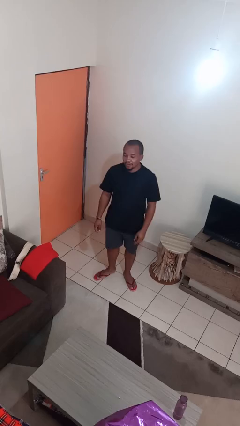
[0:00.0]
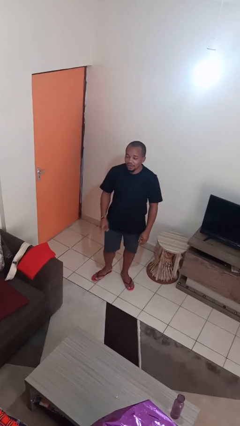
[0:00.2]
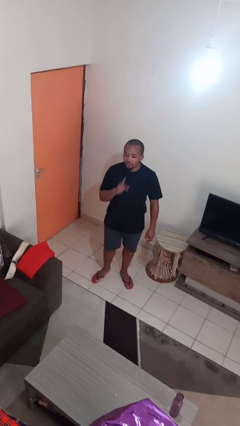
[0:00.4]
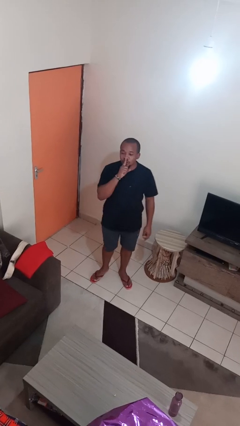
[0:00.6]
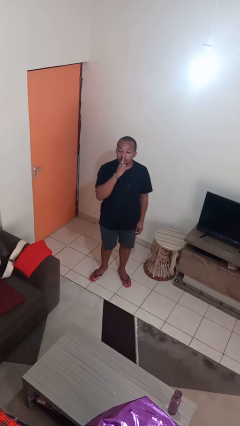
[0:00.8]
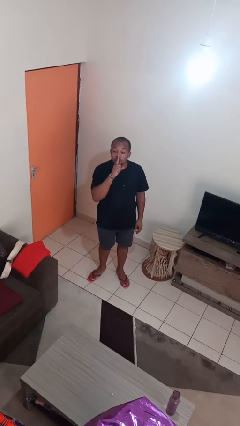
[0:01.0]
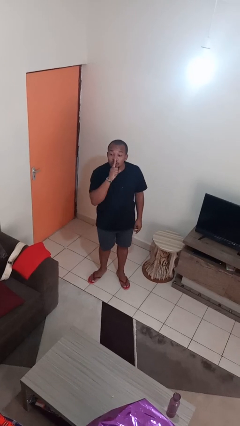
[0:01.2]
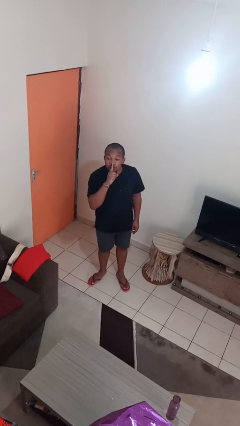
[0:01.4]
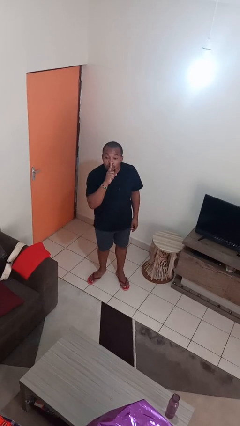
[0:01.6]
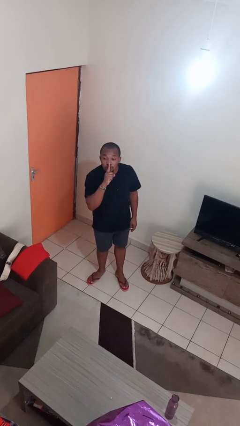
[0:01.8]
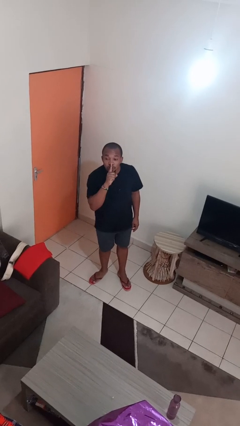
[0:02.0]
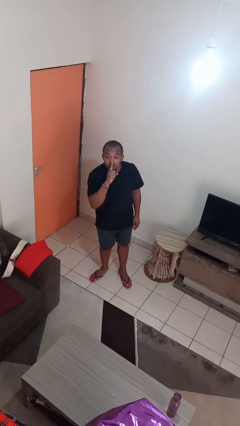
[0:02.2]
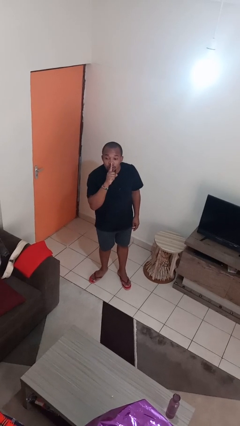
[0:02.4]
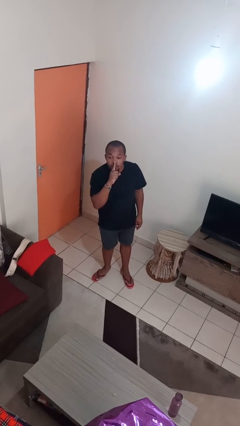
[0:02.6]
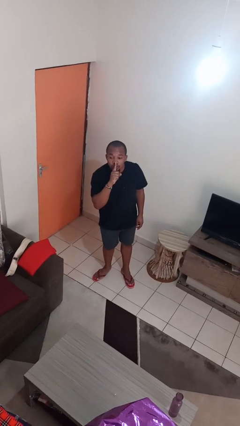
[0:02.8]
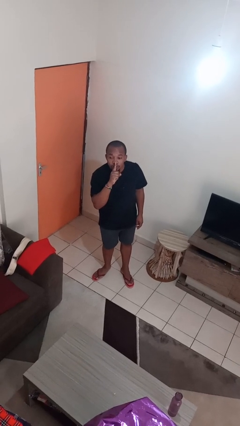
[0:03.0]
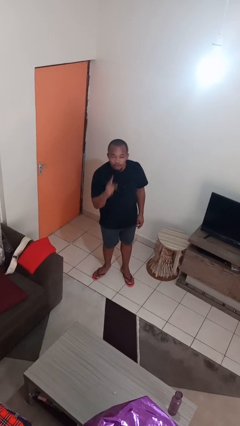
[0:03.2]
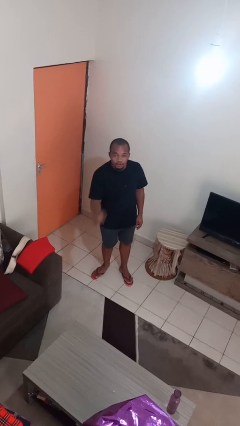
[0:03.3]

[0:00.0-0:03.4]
person gestures be quiet

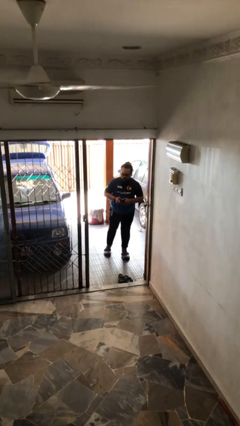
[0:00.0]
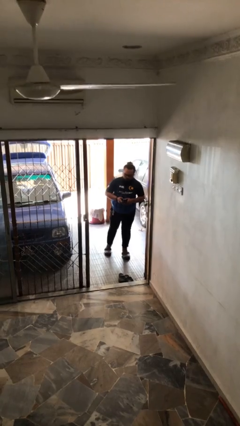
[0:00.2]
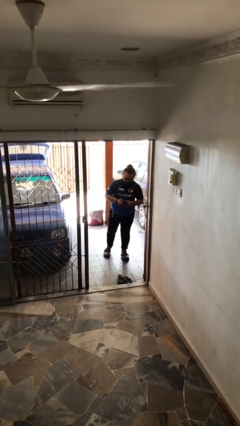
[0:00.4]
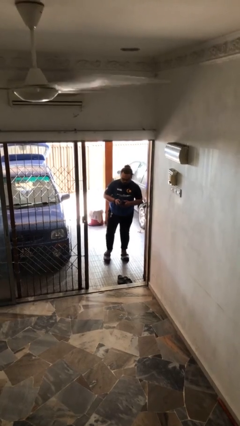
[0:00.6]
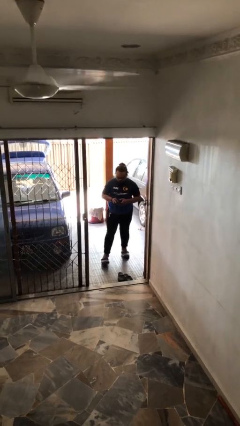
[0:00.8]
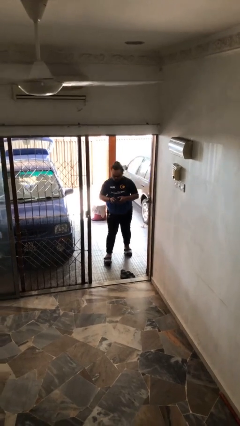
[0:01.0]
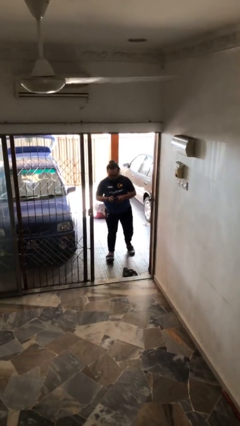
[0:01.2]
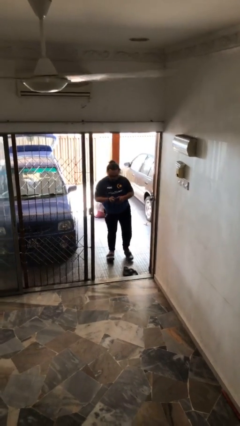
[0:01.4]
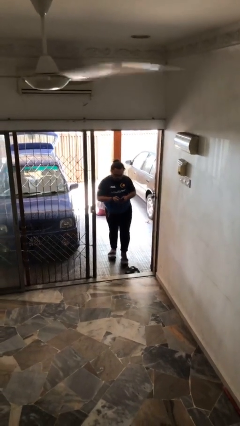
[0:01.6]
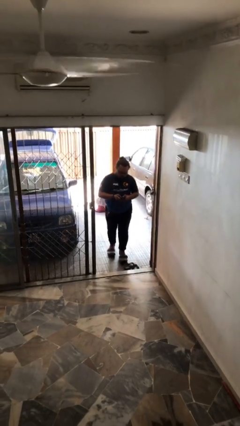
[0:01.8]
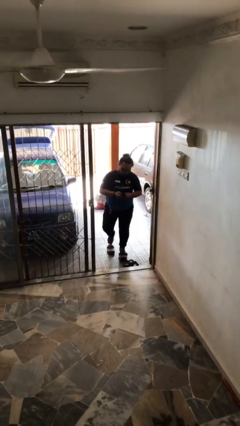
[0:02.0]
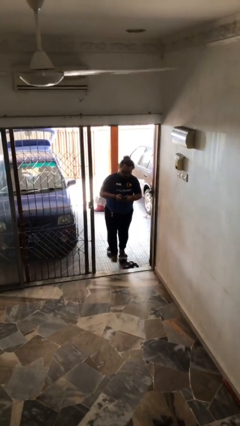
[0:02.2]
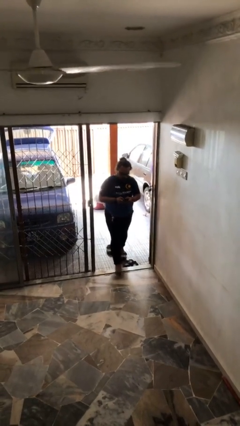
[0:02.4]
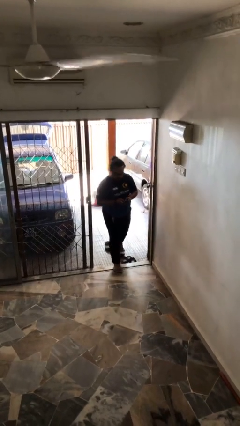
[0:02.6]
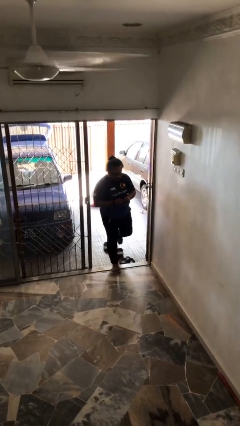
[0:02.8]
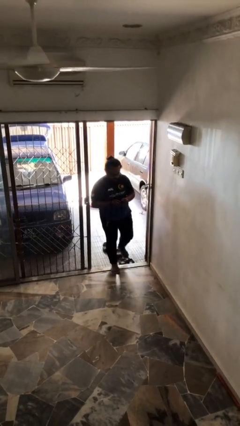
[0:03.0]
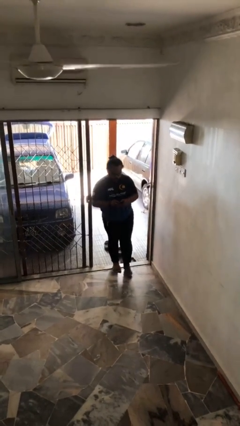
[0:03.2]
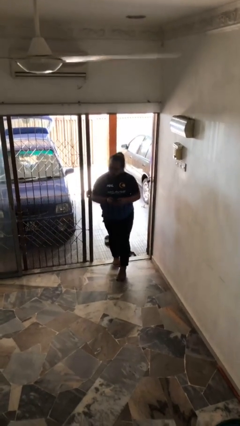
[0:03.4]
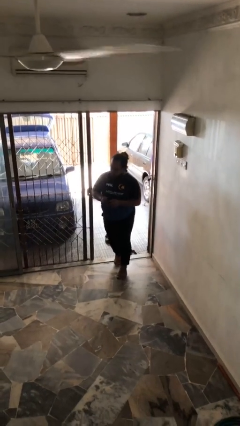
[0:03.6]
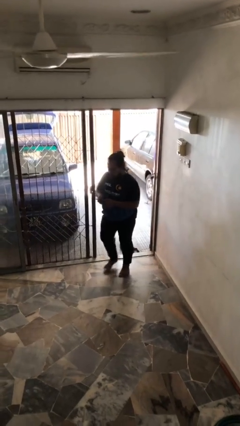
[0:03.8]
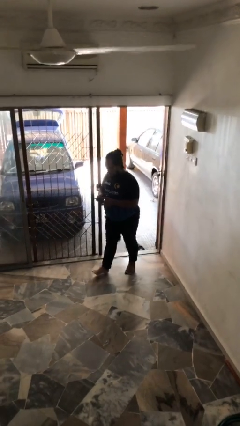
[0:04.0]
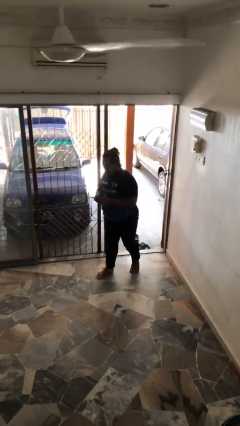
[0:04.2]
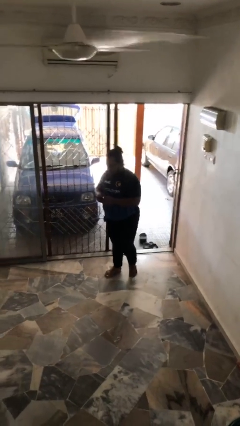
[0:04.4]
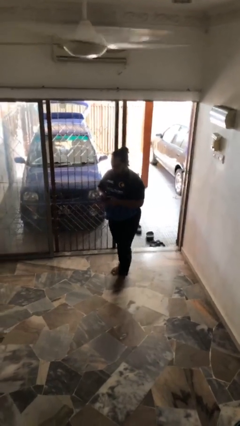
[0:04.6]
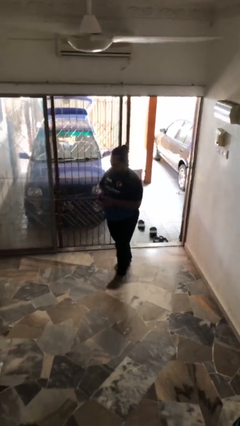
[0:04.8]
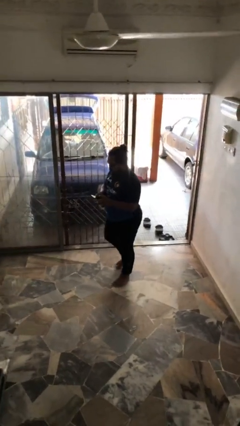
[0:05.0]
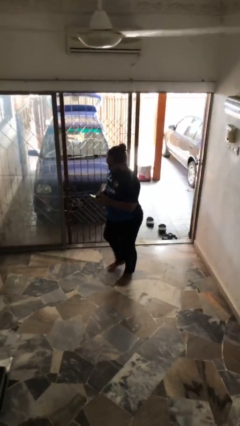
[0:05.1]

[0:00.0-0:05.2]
person enters scene through structure

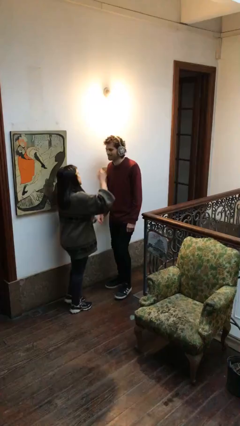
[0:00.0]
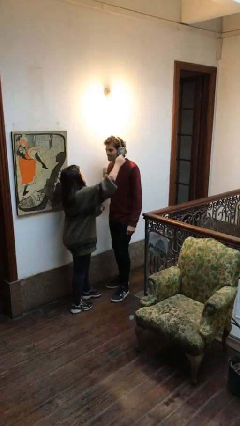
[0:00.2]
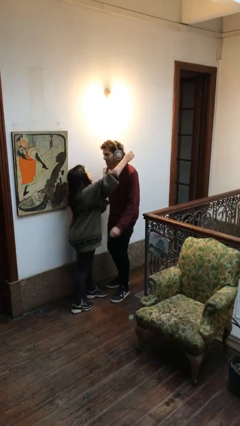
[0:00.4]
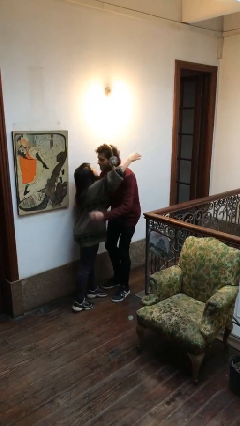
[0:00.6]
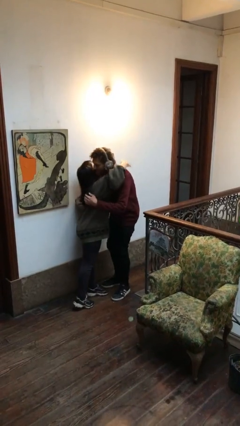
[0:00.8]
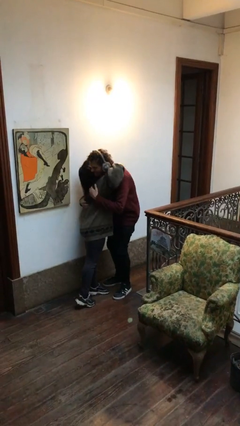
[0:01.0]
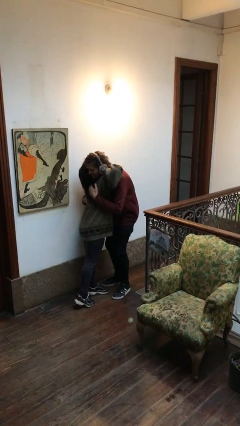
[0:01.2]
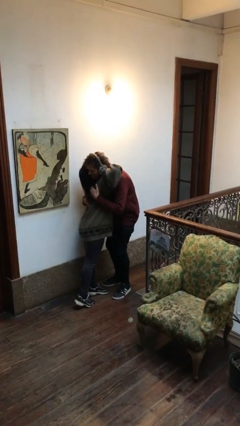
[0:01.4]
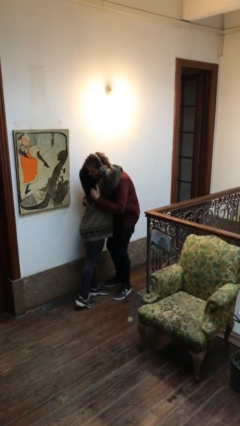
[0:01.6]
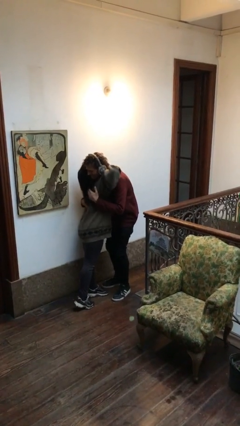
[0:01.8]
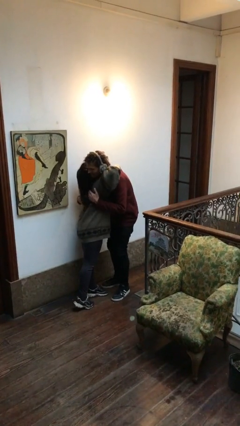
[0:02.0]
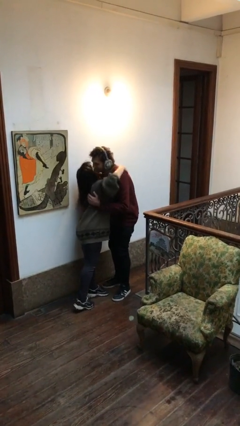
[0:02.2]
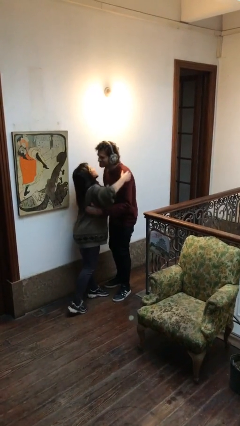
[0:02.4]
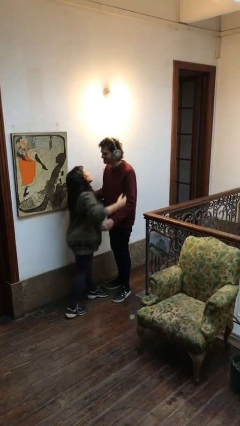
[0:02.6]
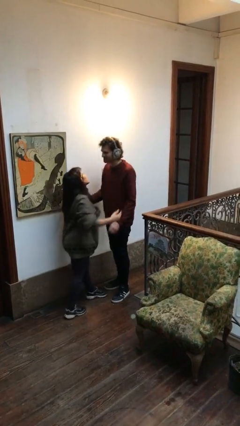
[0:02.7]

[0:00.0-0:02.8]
person embraces person

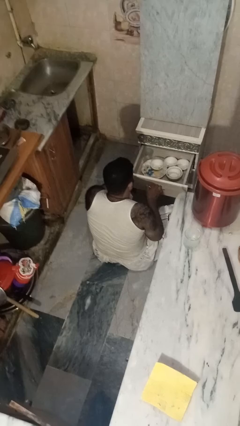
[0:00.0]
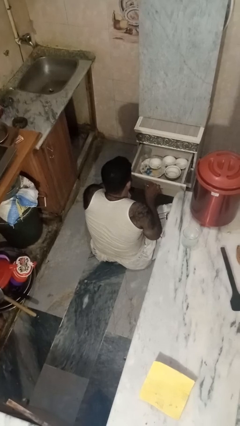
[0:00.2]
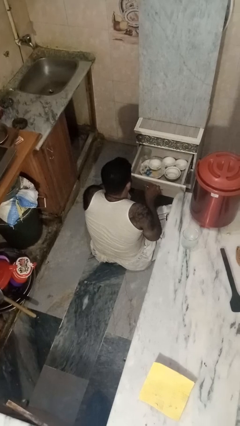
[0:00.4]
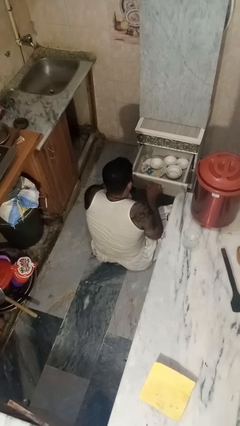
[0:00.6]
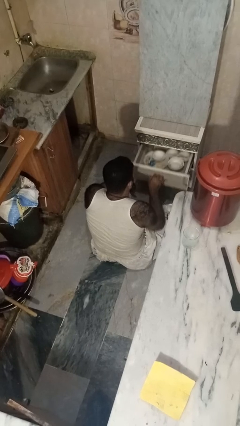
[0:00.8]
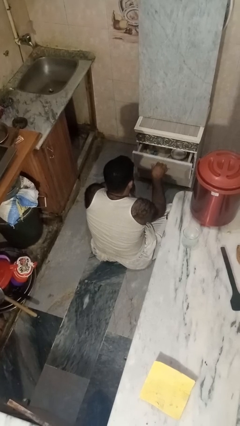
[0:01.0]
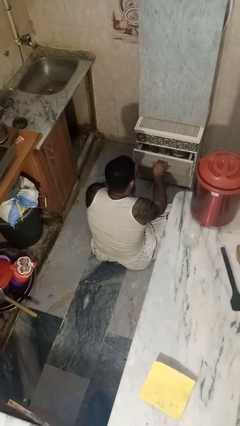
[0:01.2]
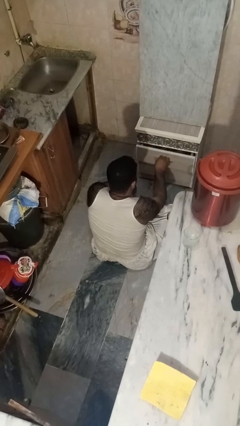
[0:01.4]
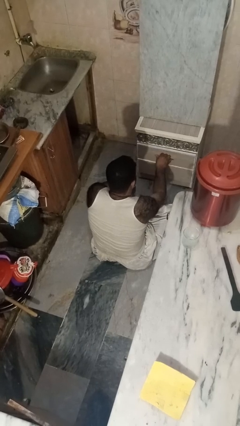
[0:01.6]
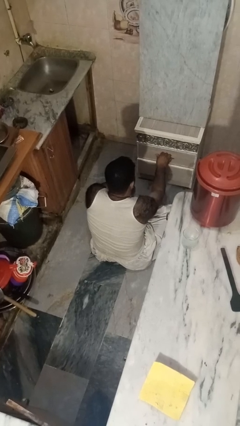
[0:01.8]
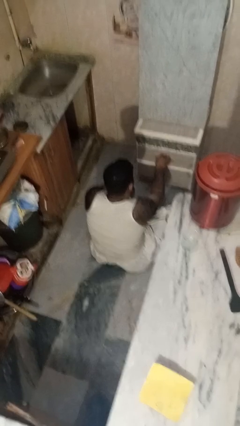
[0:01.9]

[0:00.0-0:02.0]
person closes kitchen drawer

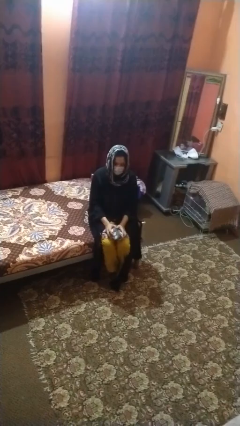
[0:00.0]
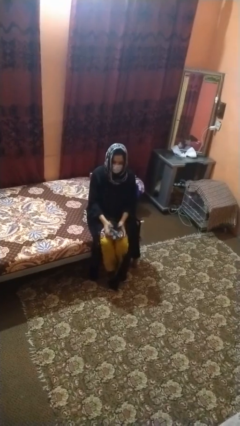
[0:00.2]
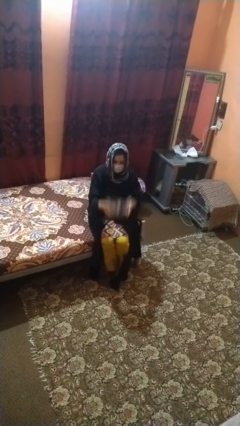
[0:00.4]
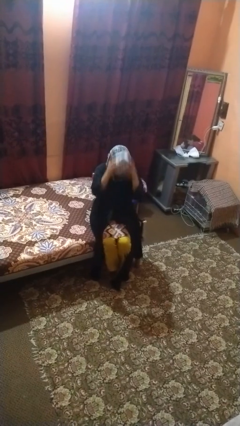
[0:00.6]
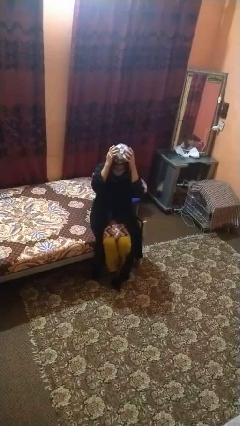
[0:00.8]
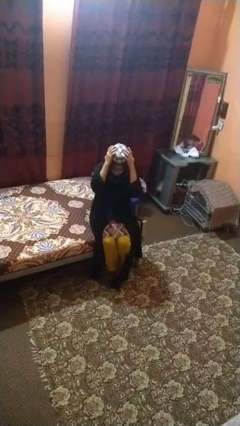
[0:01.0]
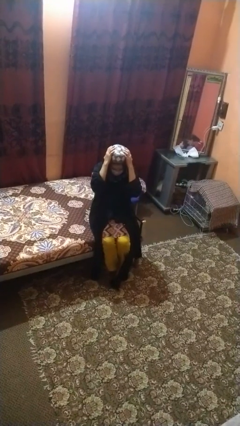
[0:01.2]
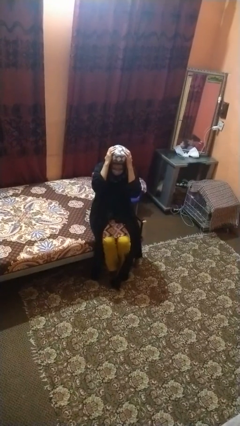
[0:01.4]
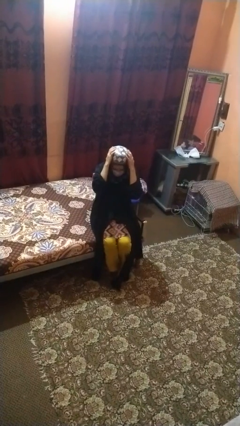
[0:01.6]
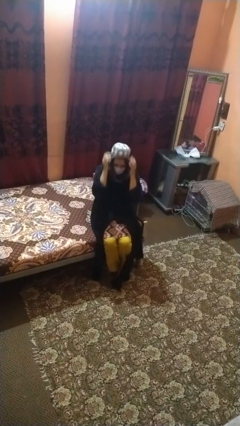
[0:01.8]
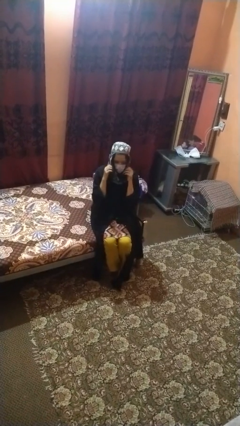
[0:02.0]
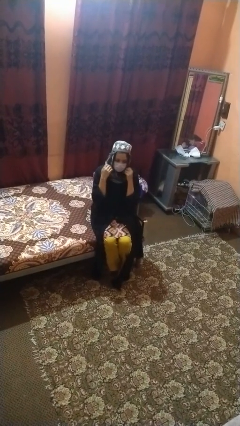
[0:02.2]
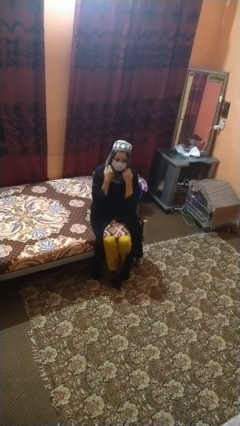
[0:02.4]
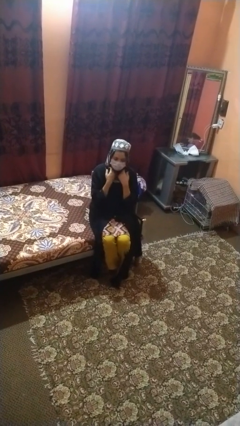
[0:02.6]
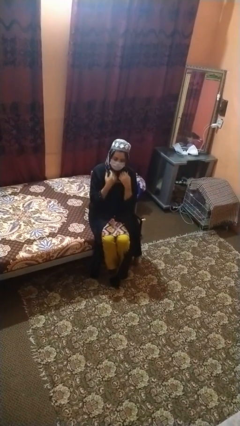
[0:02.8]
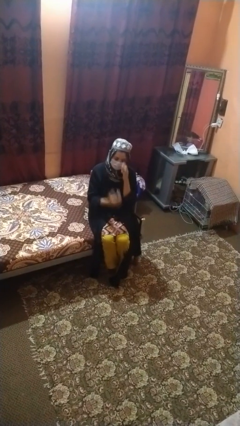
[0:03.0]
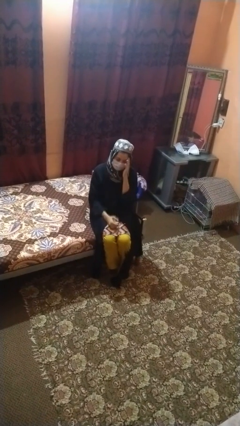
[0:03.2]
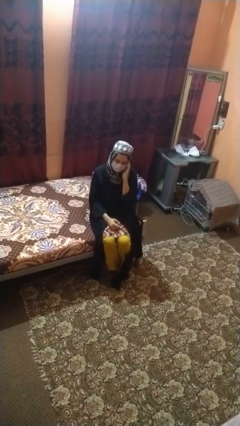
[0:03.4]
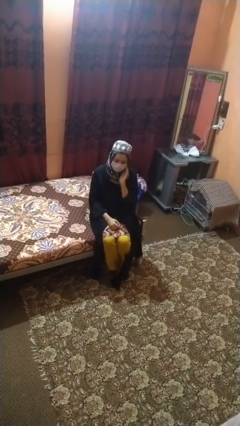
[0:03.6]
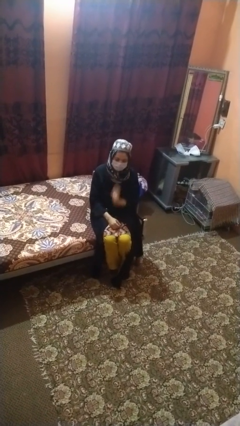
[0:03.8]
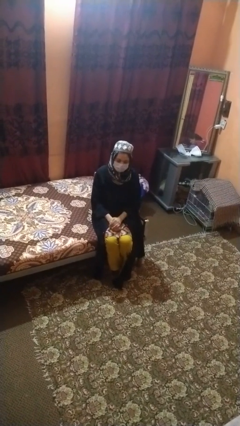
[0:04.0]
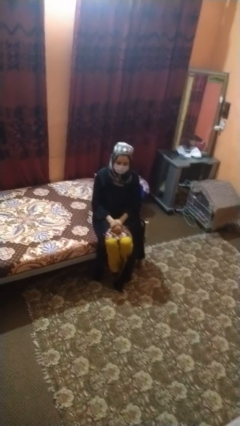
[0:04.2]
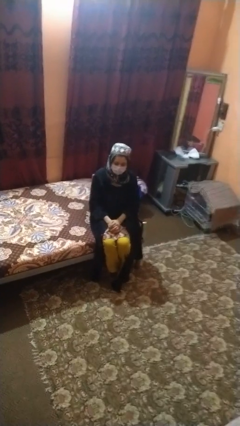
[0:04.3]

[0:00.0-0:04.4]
person puts on hat
